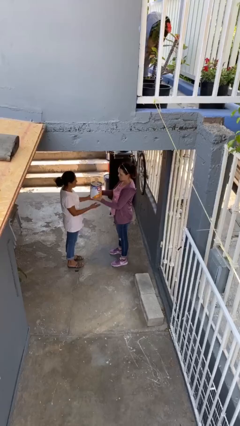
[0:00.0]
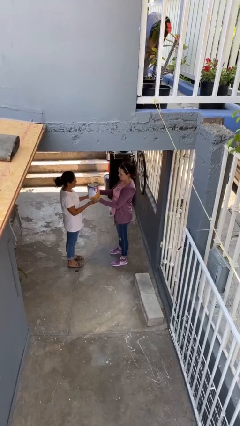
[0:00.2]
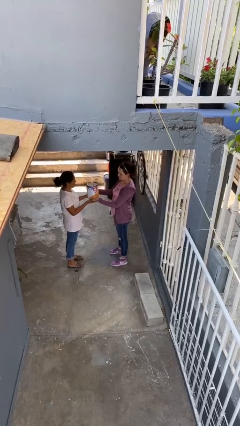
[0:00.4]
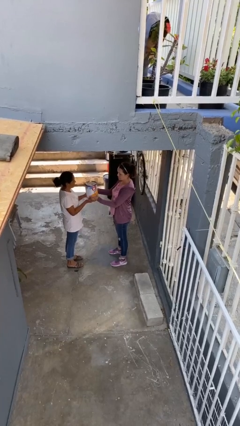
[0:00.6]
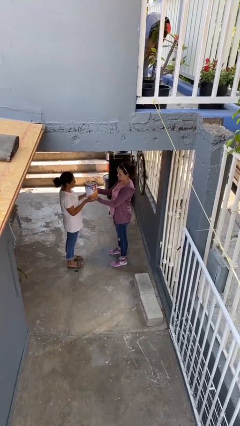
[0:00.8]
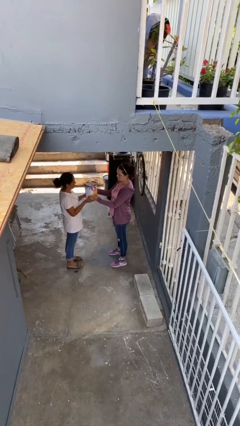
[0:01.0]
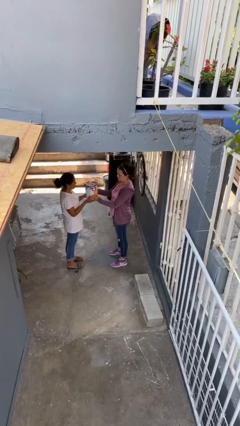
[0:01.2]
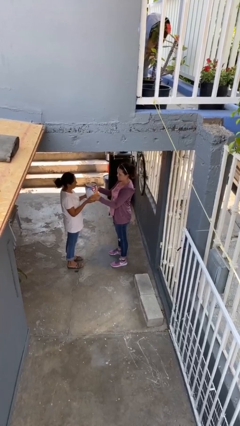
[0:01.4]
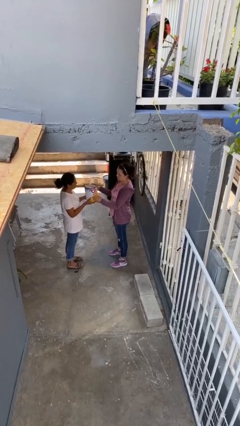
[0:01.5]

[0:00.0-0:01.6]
person transfers object to person

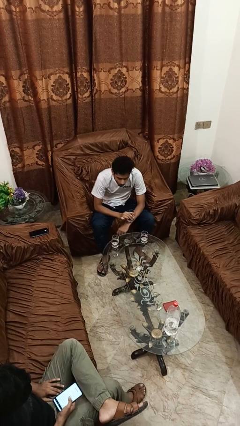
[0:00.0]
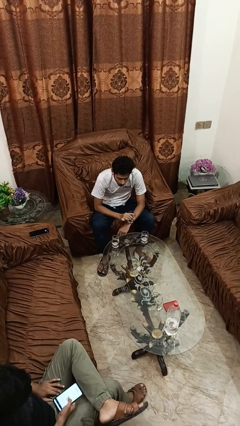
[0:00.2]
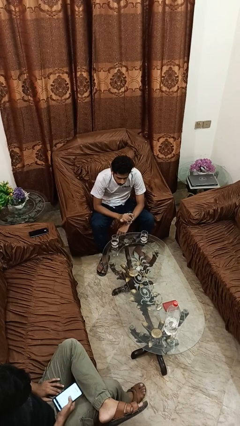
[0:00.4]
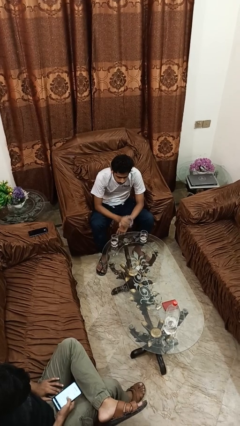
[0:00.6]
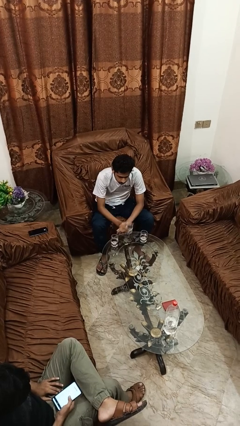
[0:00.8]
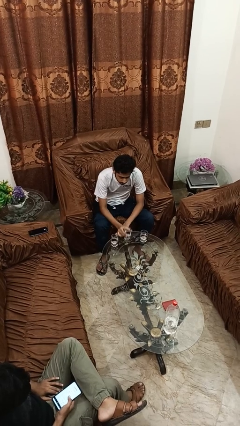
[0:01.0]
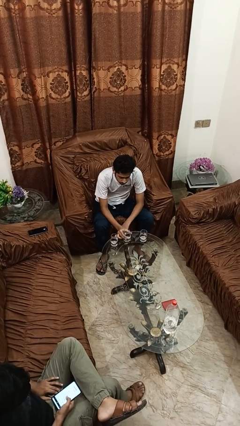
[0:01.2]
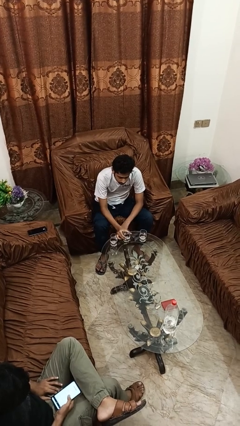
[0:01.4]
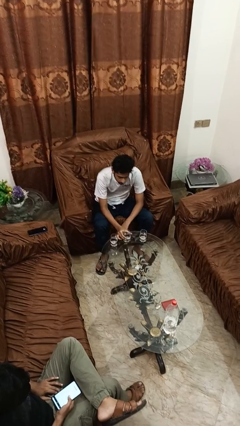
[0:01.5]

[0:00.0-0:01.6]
person puts down object on table

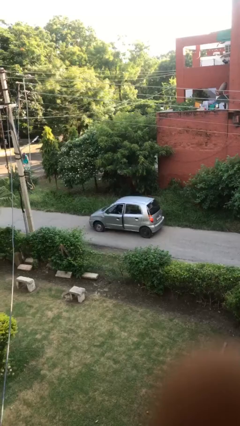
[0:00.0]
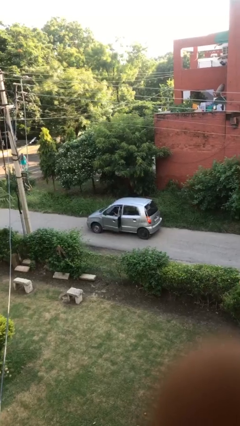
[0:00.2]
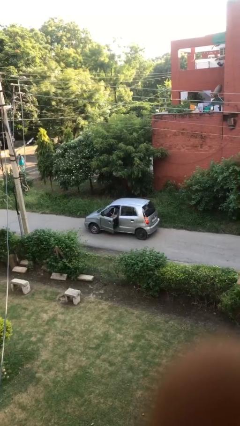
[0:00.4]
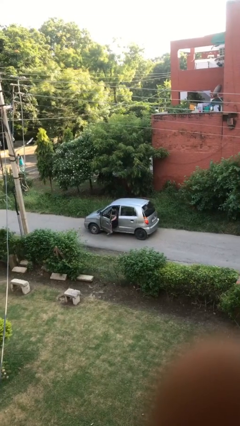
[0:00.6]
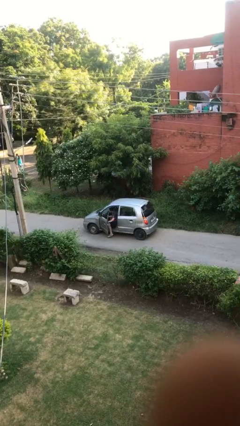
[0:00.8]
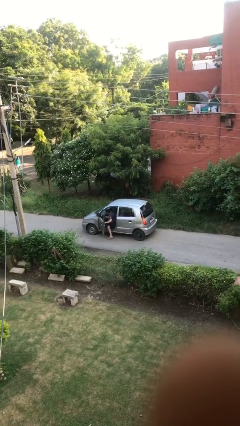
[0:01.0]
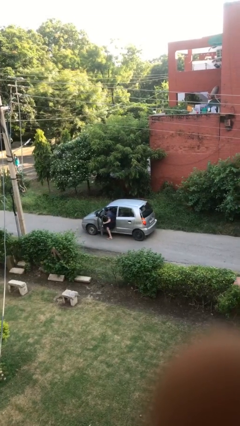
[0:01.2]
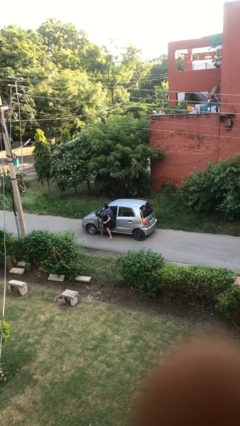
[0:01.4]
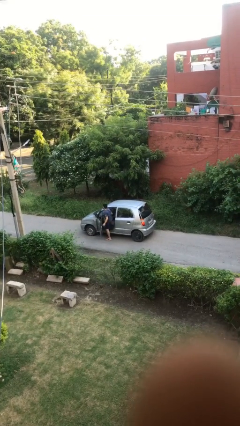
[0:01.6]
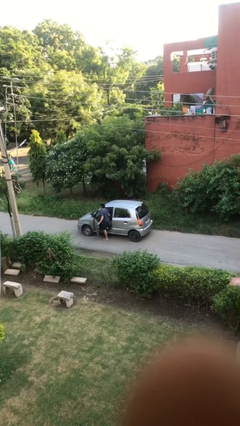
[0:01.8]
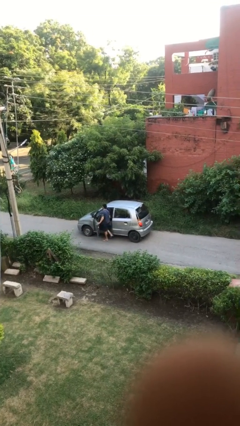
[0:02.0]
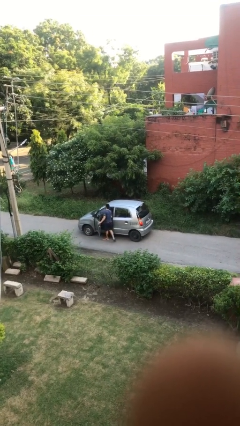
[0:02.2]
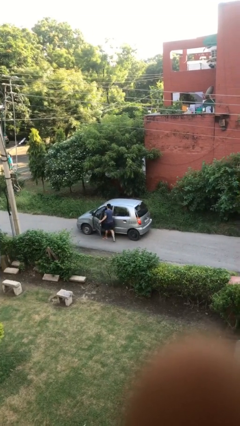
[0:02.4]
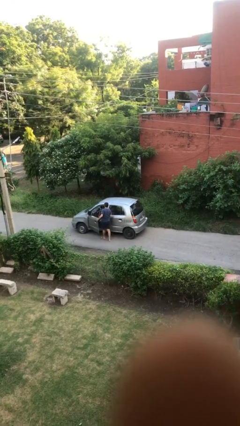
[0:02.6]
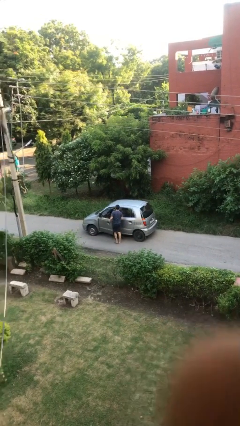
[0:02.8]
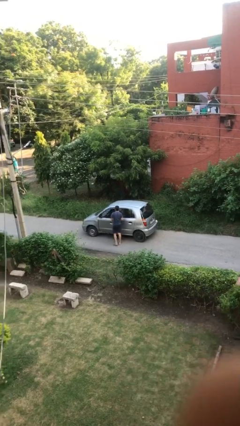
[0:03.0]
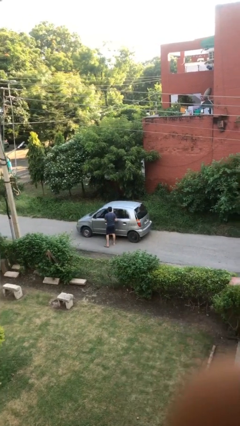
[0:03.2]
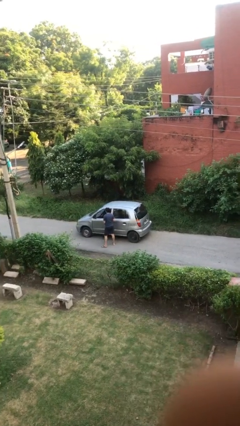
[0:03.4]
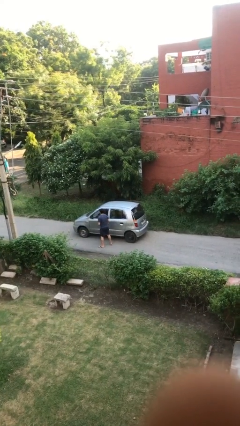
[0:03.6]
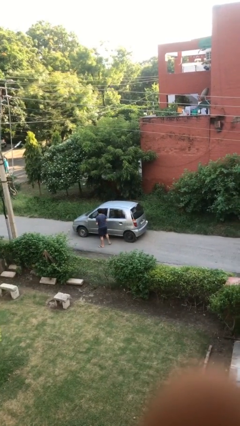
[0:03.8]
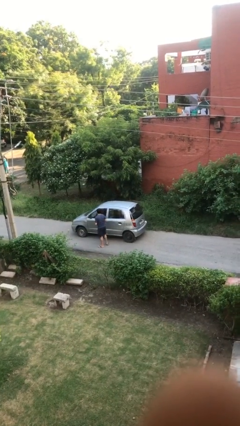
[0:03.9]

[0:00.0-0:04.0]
car drops off person

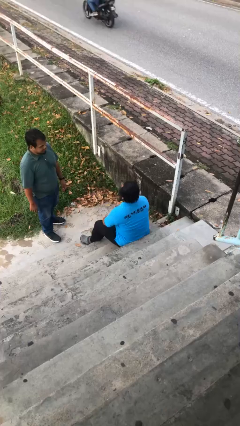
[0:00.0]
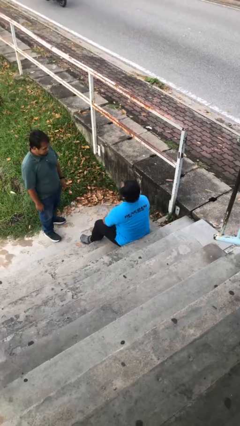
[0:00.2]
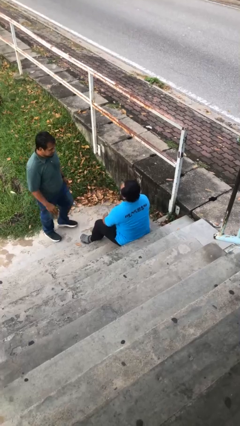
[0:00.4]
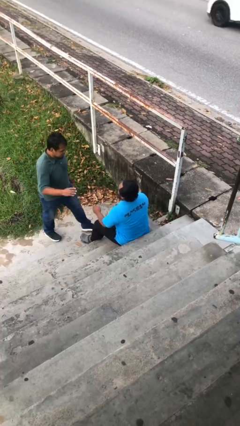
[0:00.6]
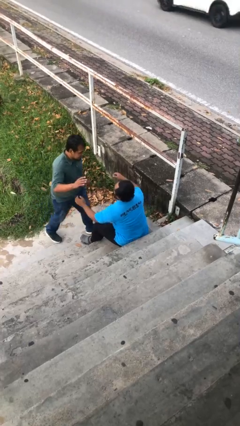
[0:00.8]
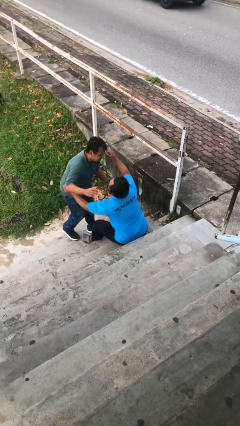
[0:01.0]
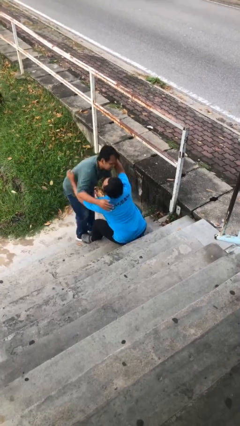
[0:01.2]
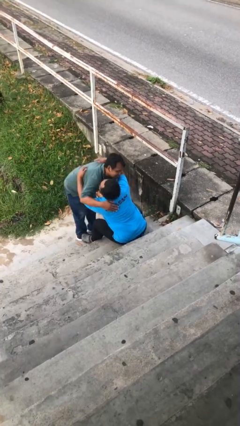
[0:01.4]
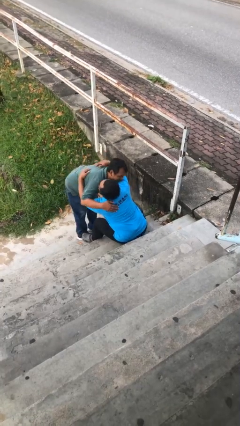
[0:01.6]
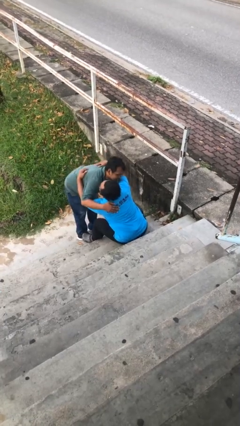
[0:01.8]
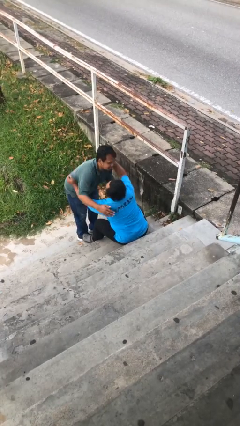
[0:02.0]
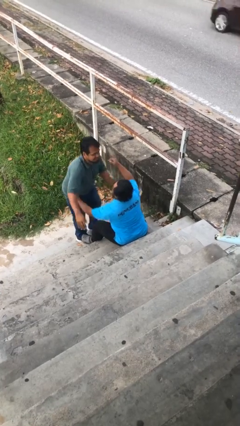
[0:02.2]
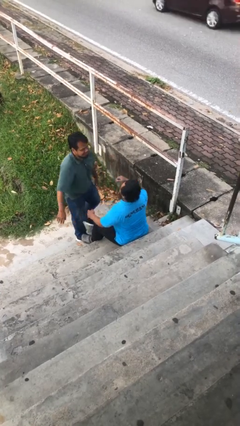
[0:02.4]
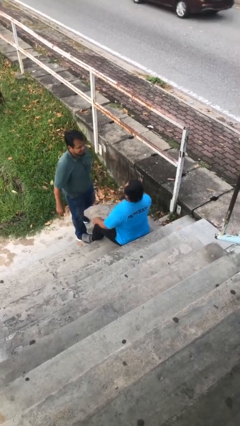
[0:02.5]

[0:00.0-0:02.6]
person embraces person

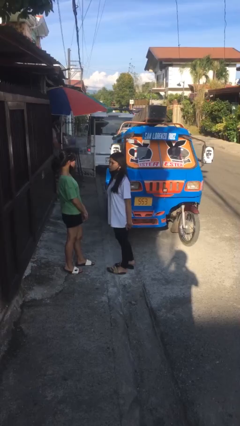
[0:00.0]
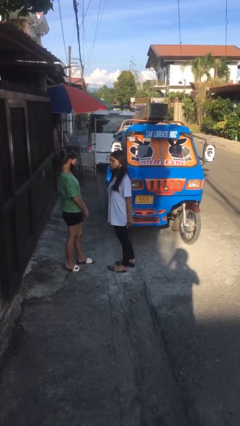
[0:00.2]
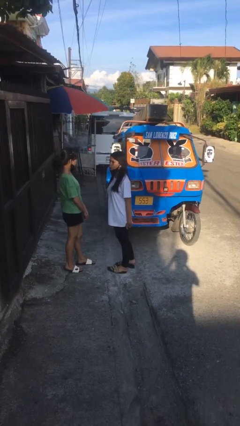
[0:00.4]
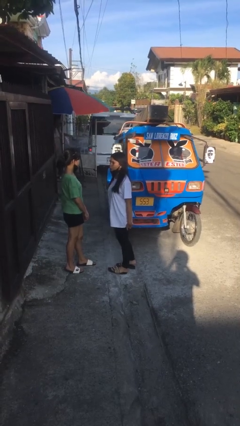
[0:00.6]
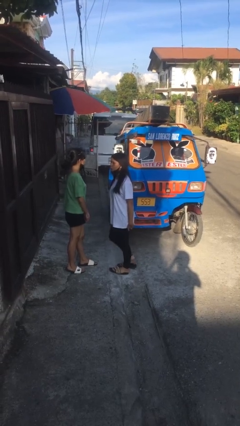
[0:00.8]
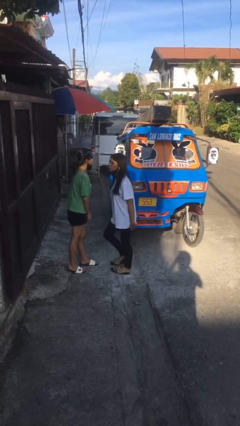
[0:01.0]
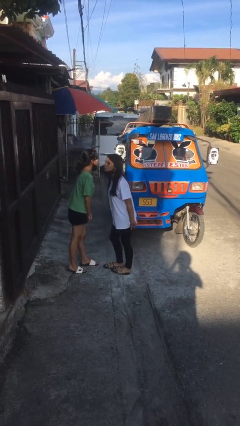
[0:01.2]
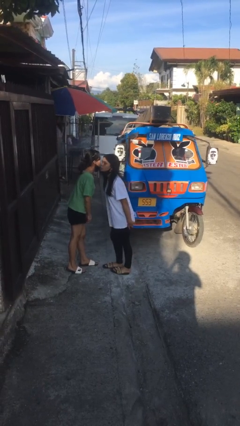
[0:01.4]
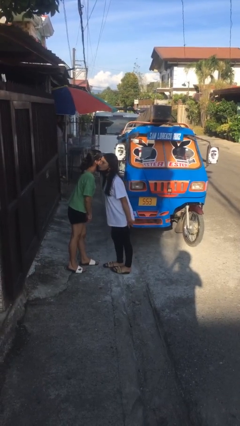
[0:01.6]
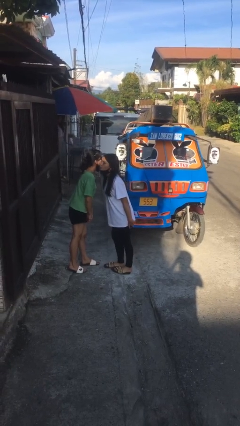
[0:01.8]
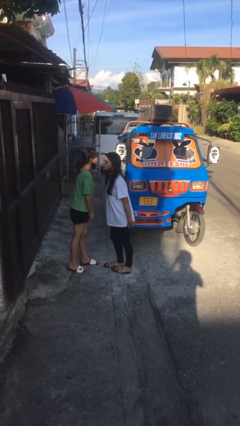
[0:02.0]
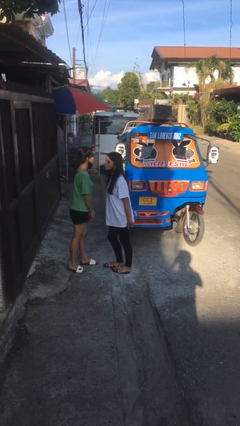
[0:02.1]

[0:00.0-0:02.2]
person kisses cheek of person

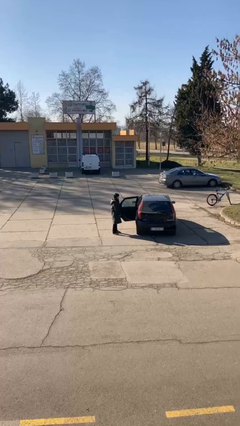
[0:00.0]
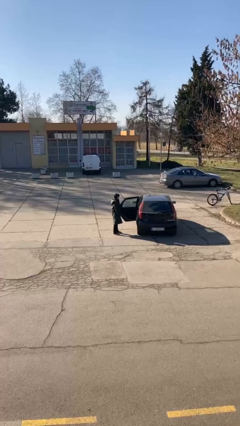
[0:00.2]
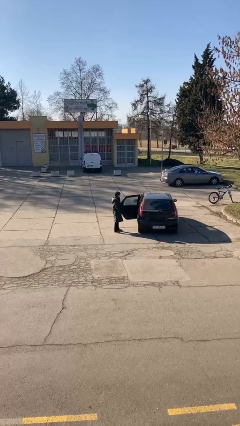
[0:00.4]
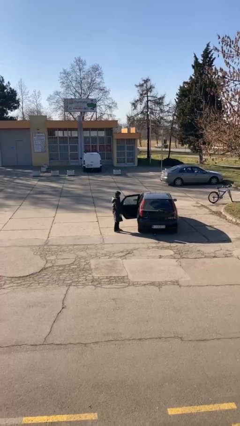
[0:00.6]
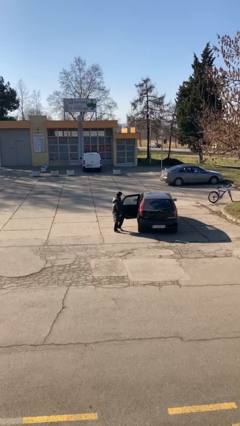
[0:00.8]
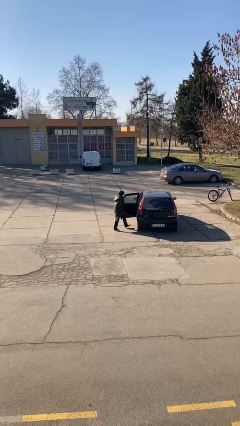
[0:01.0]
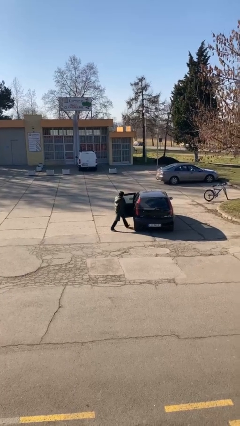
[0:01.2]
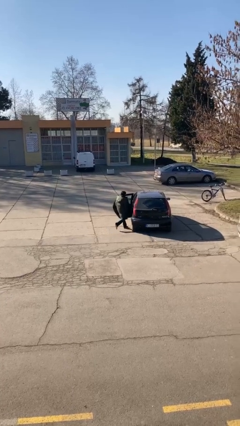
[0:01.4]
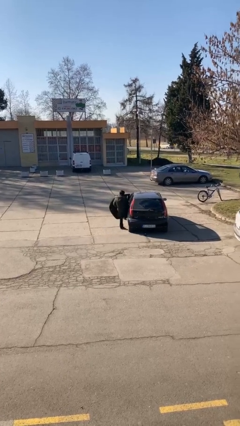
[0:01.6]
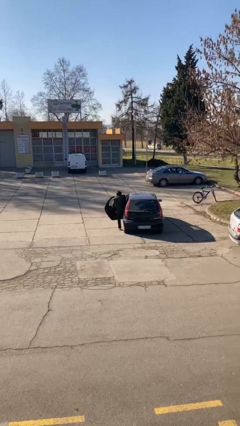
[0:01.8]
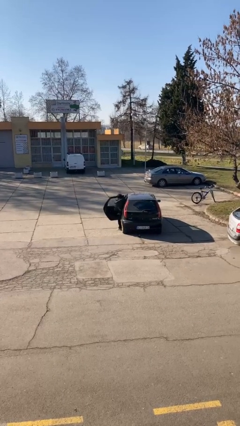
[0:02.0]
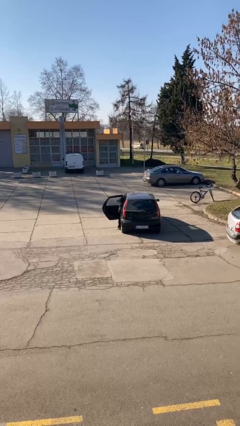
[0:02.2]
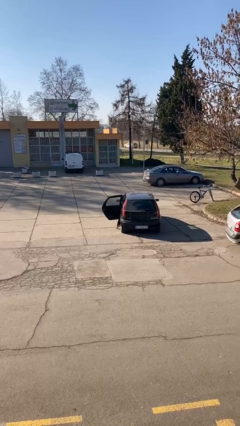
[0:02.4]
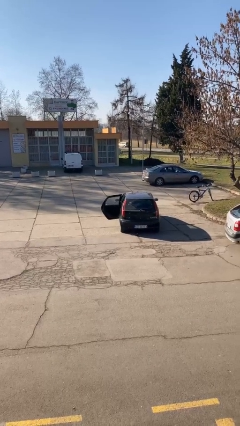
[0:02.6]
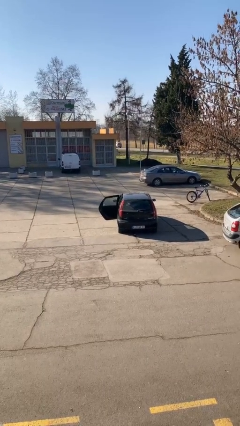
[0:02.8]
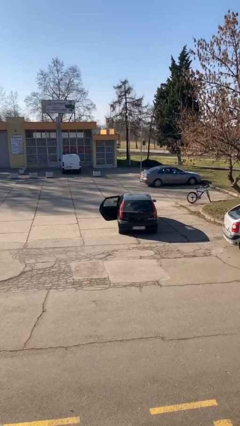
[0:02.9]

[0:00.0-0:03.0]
person enters car

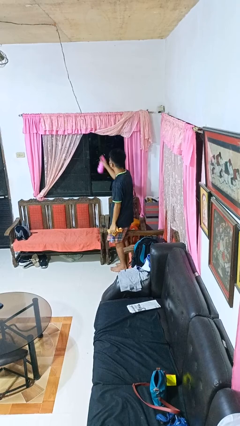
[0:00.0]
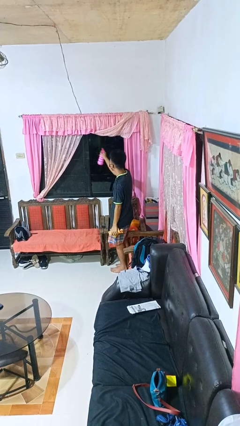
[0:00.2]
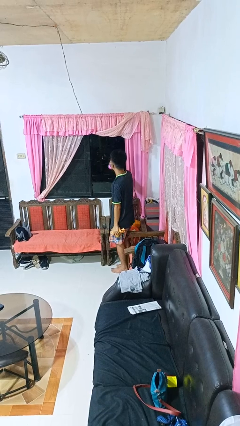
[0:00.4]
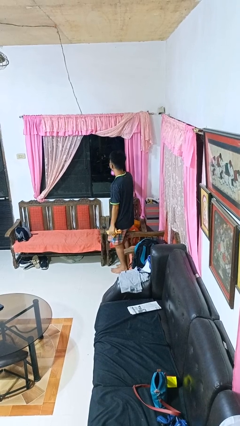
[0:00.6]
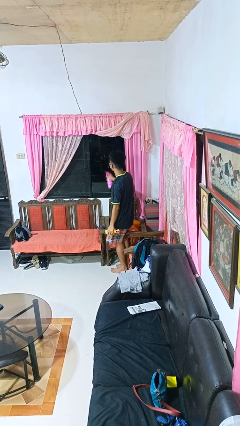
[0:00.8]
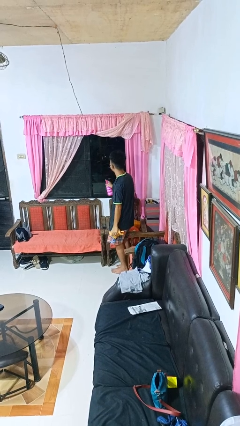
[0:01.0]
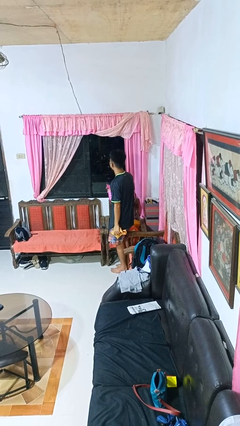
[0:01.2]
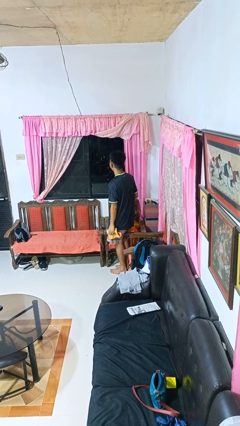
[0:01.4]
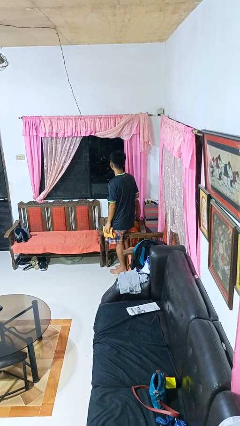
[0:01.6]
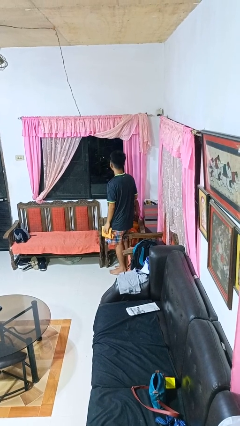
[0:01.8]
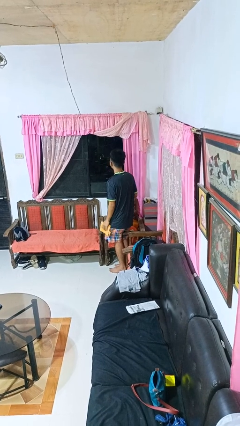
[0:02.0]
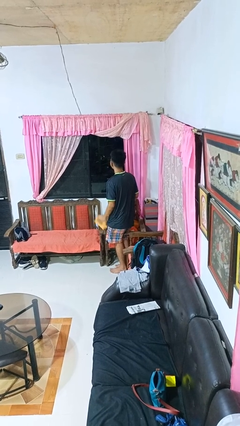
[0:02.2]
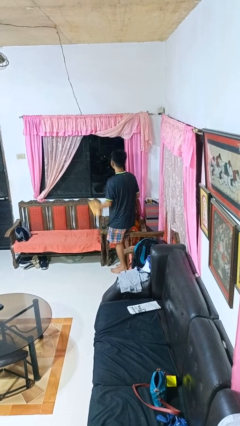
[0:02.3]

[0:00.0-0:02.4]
person sprays from bottle
